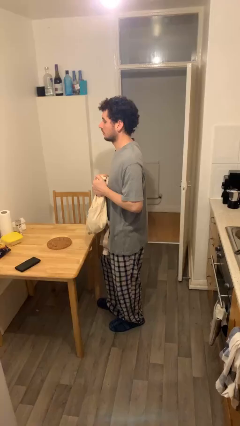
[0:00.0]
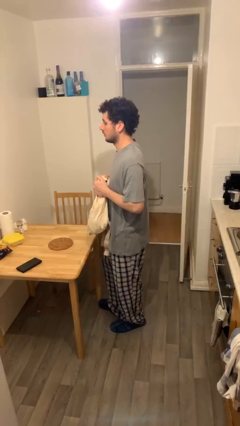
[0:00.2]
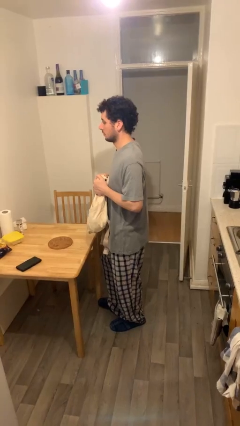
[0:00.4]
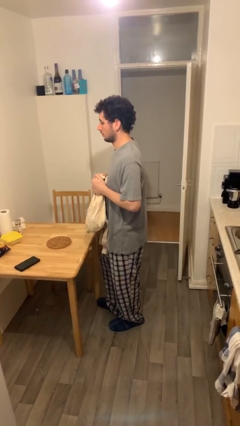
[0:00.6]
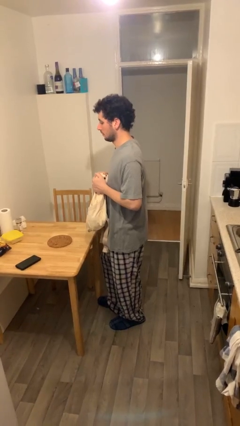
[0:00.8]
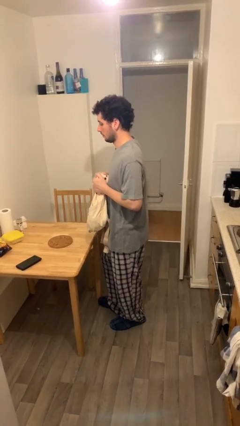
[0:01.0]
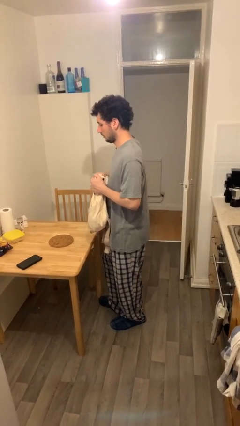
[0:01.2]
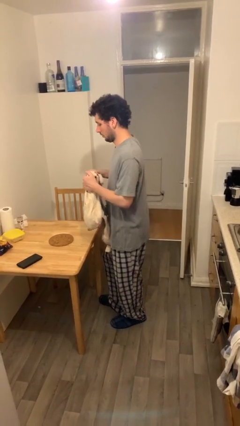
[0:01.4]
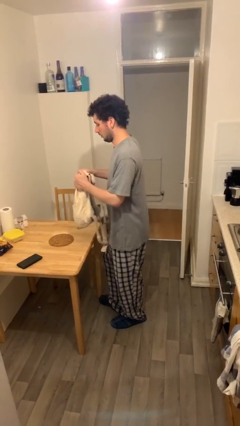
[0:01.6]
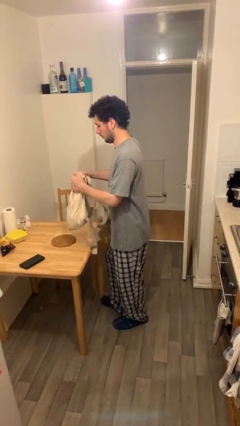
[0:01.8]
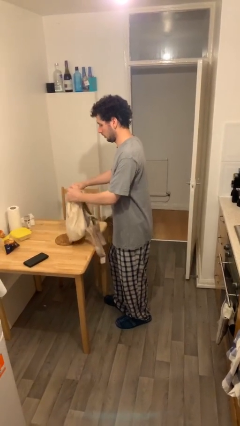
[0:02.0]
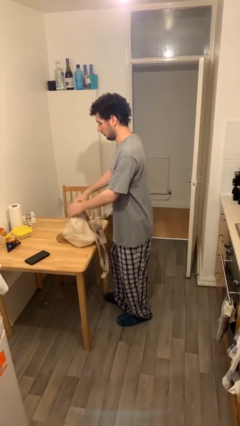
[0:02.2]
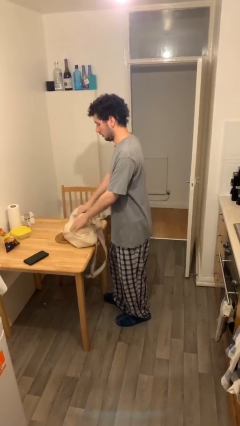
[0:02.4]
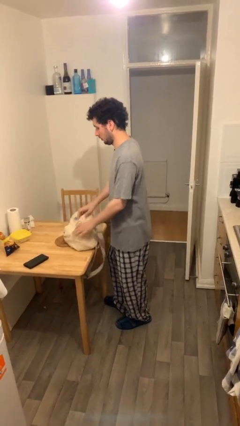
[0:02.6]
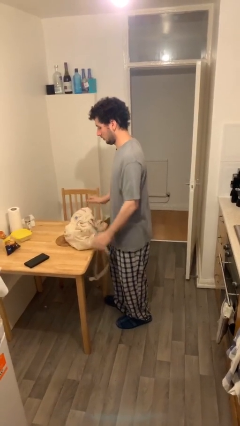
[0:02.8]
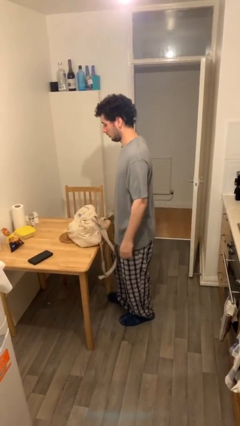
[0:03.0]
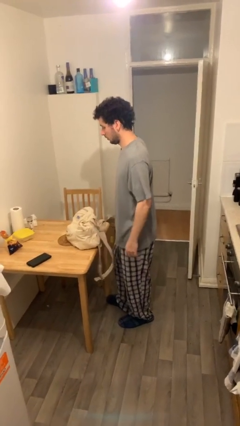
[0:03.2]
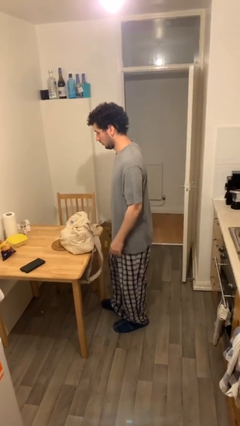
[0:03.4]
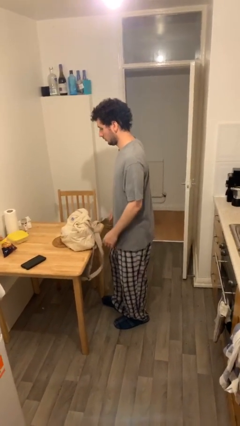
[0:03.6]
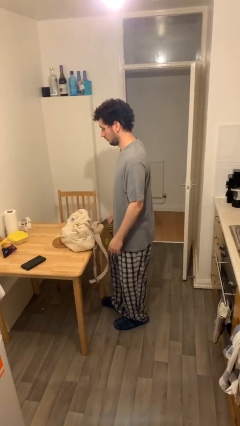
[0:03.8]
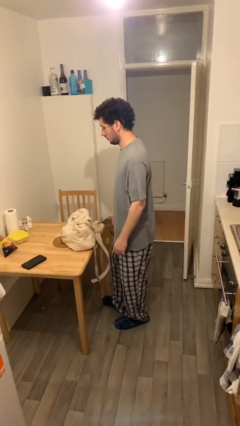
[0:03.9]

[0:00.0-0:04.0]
person puts down object on table

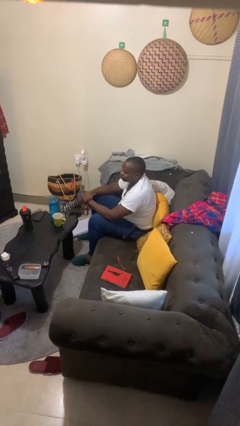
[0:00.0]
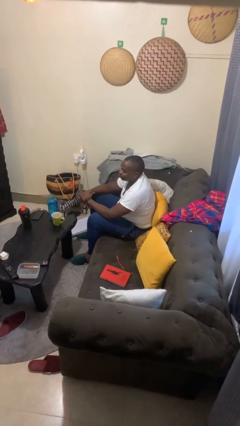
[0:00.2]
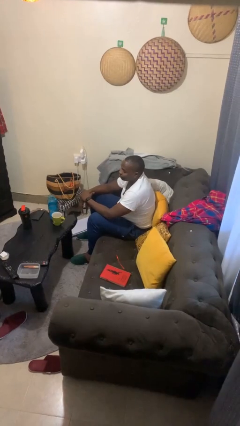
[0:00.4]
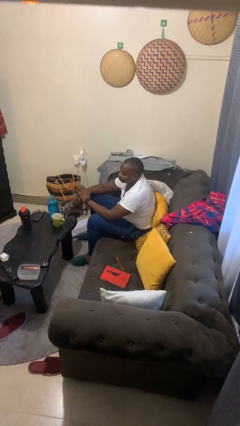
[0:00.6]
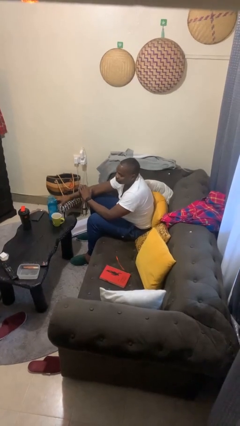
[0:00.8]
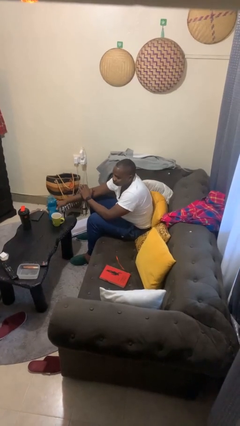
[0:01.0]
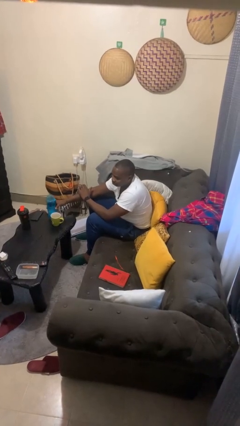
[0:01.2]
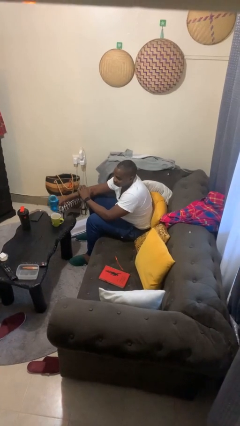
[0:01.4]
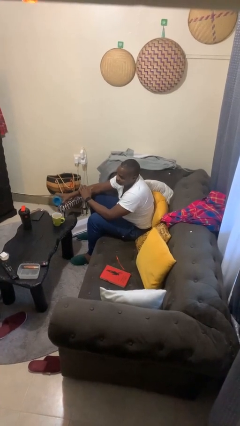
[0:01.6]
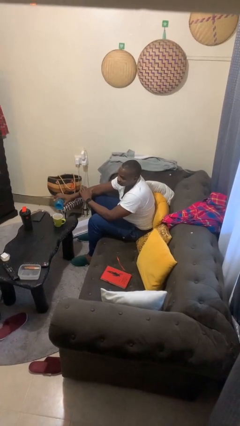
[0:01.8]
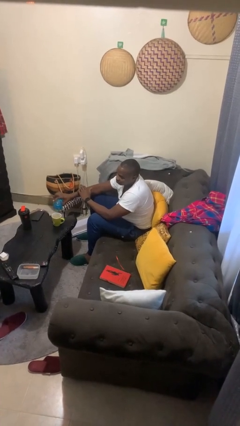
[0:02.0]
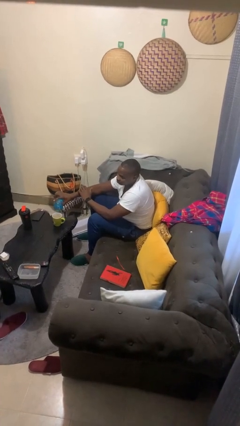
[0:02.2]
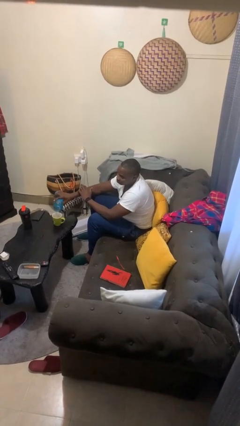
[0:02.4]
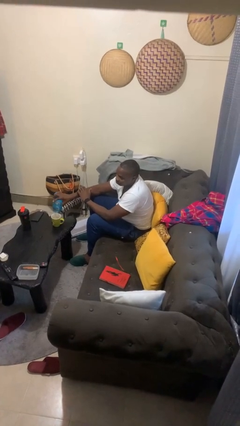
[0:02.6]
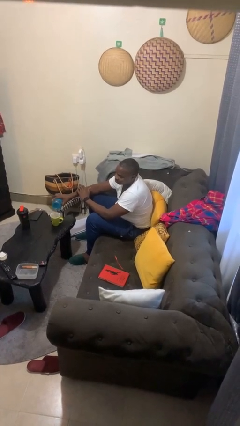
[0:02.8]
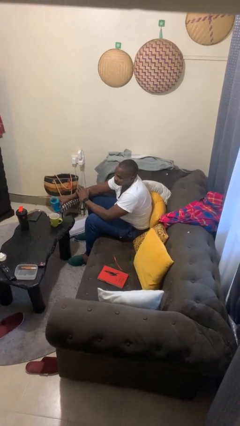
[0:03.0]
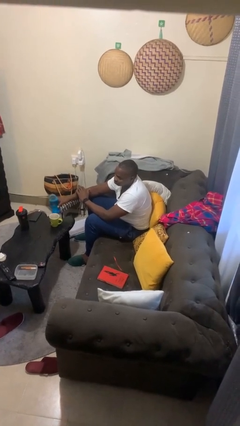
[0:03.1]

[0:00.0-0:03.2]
person pours liquid into cup

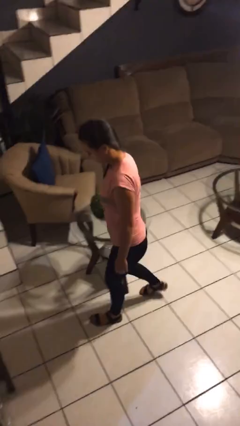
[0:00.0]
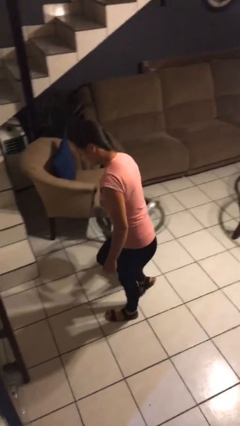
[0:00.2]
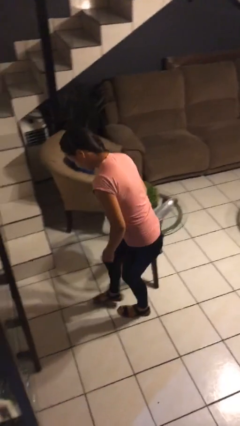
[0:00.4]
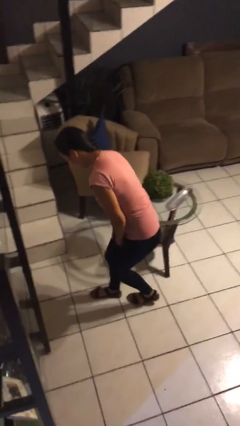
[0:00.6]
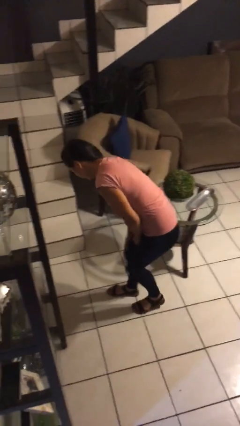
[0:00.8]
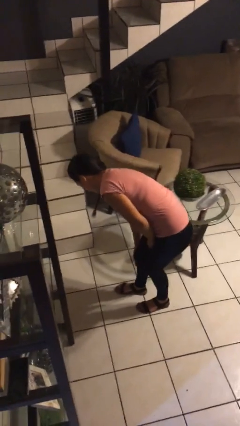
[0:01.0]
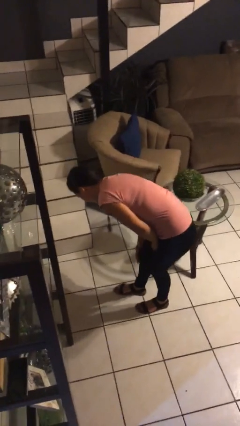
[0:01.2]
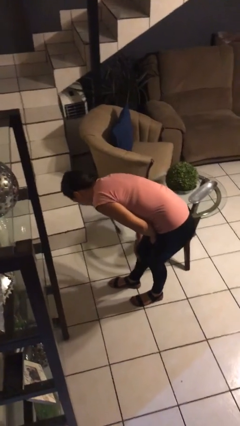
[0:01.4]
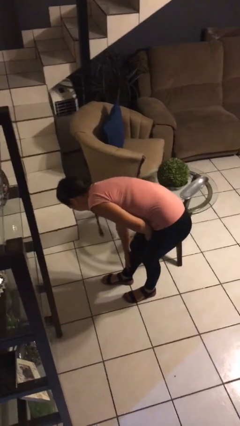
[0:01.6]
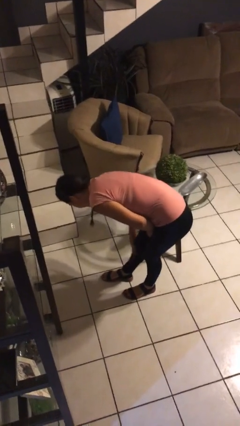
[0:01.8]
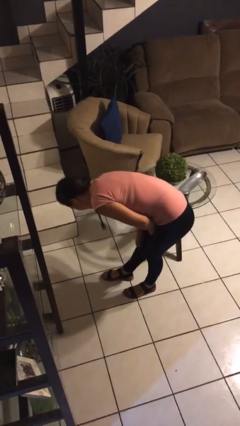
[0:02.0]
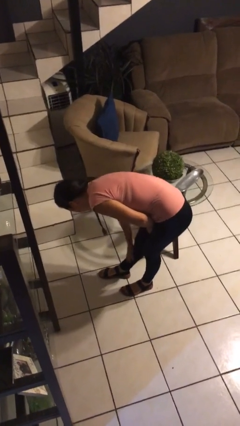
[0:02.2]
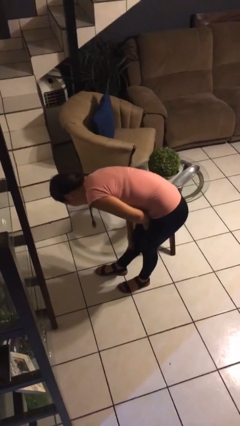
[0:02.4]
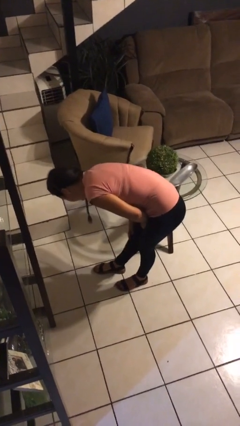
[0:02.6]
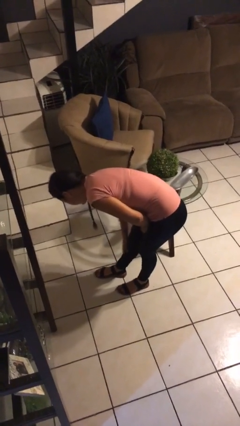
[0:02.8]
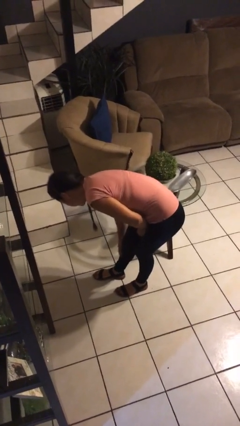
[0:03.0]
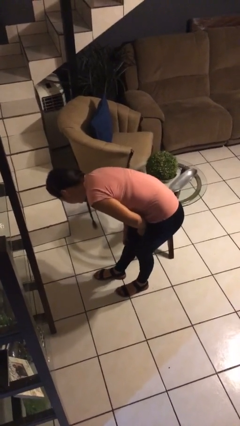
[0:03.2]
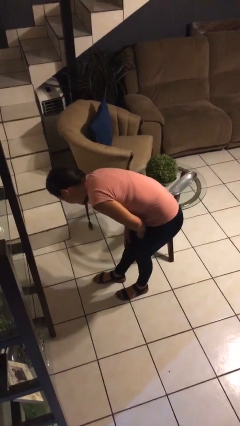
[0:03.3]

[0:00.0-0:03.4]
person bumps into table

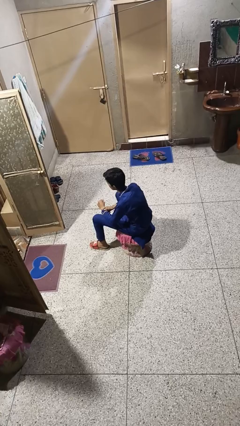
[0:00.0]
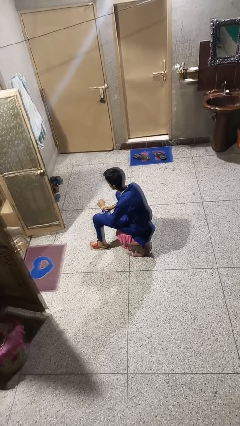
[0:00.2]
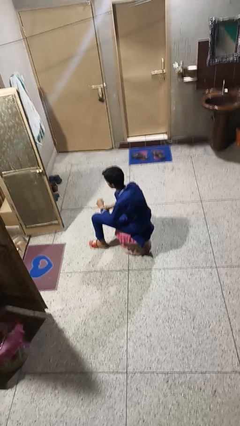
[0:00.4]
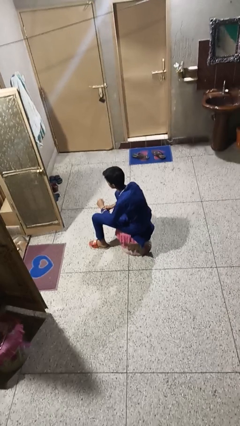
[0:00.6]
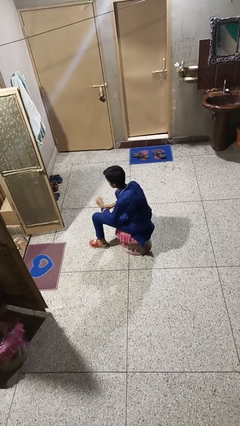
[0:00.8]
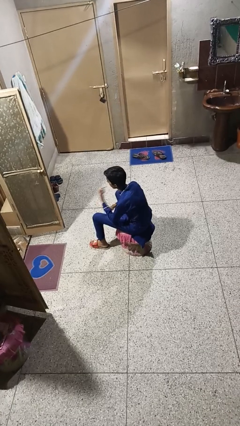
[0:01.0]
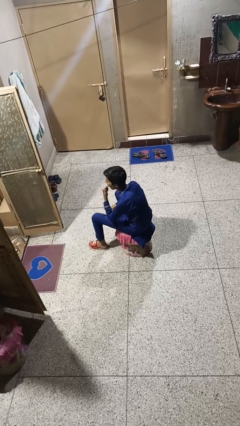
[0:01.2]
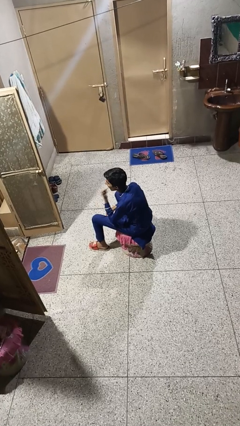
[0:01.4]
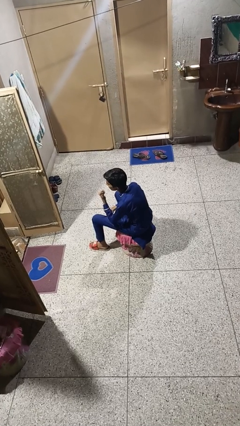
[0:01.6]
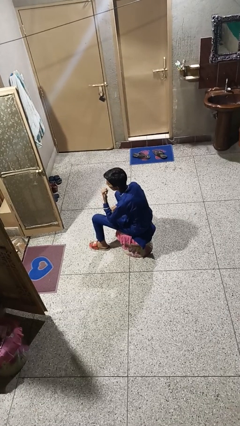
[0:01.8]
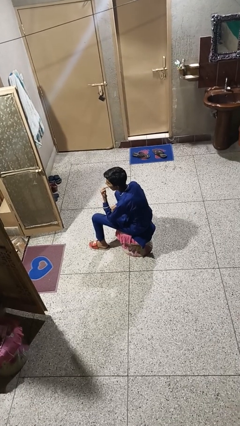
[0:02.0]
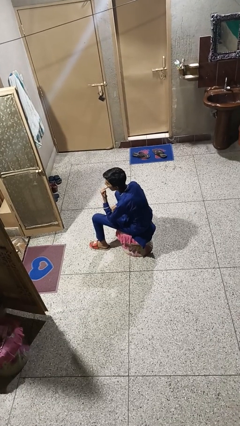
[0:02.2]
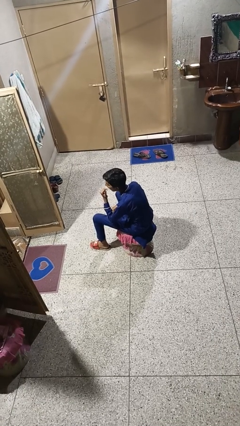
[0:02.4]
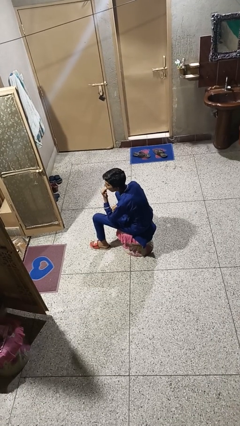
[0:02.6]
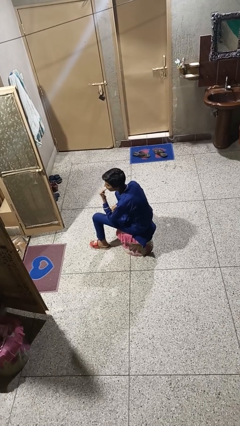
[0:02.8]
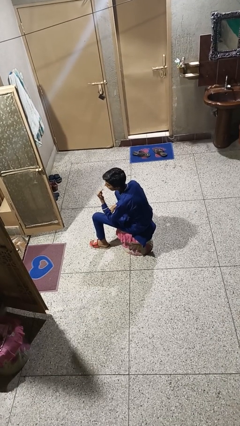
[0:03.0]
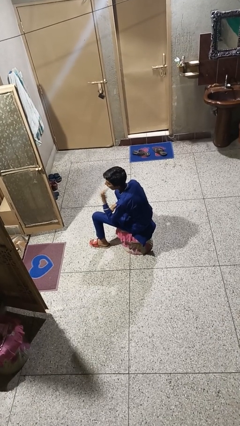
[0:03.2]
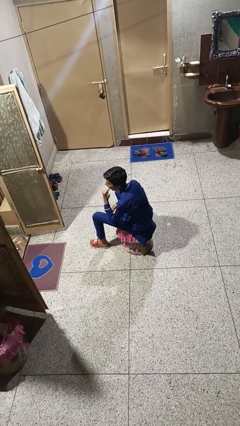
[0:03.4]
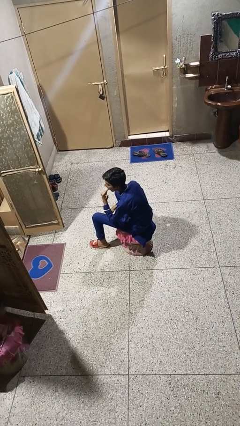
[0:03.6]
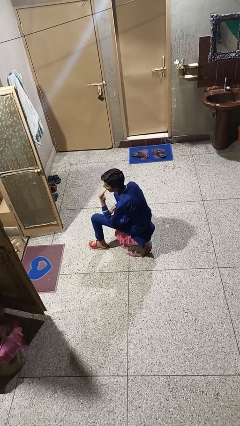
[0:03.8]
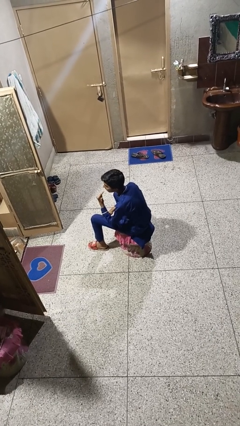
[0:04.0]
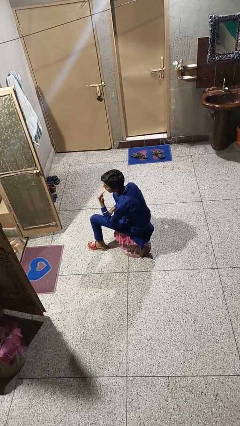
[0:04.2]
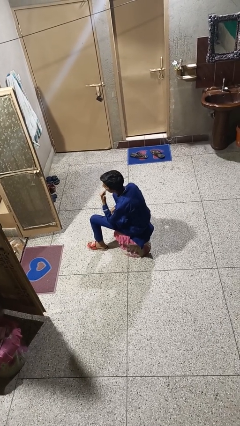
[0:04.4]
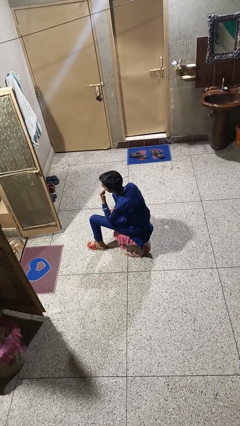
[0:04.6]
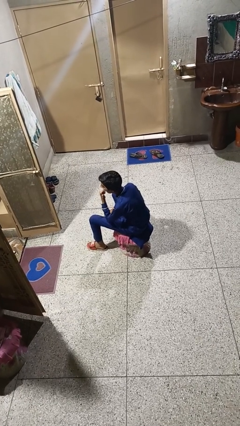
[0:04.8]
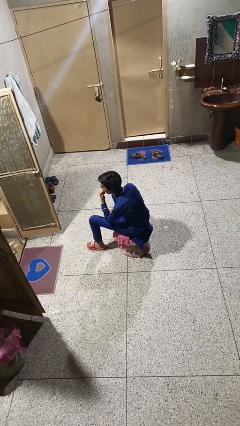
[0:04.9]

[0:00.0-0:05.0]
person licks fingers

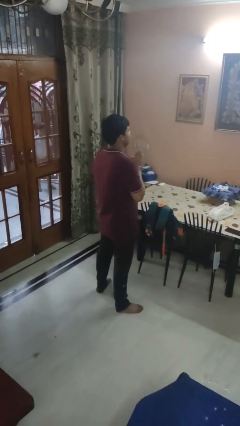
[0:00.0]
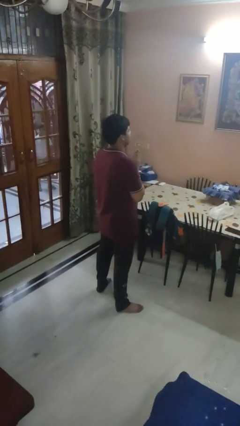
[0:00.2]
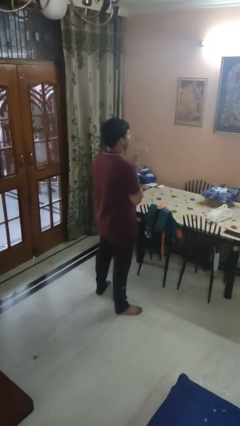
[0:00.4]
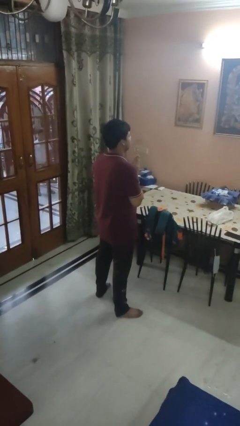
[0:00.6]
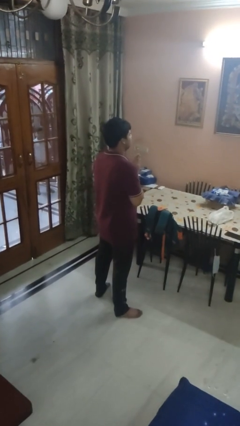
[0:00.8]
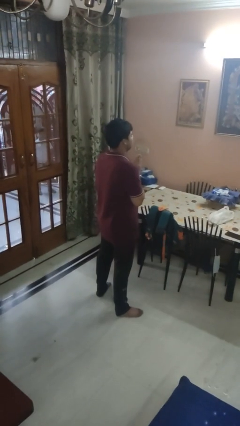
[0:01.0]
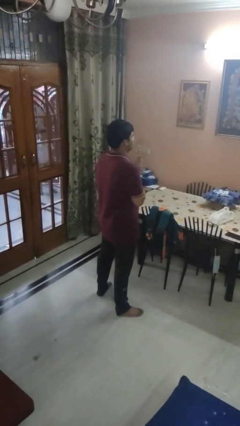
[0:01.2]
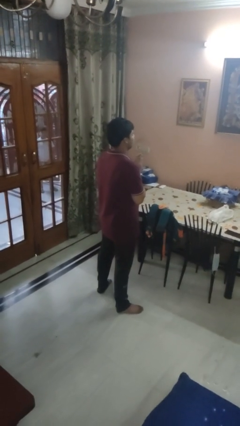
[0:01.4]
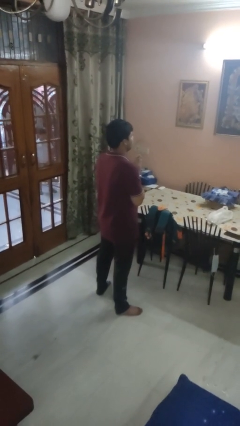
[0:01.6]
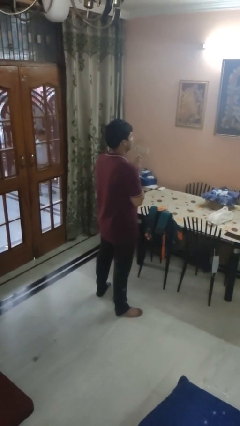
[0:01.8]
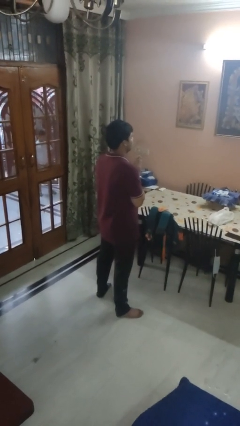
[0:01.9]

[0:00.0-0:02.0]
person prays
